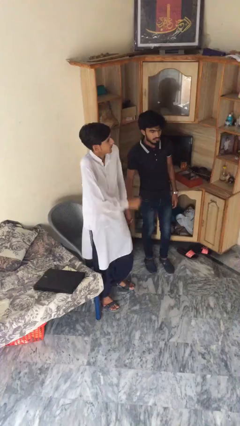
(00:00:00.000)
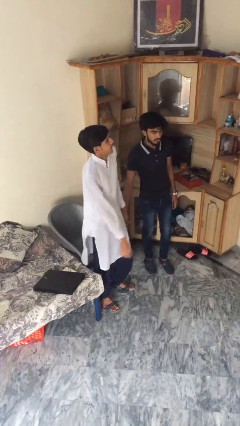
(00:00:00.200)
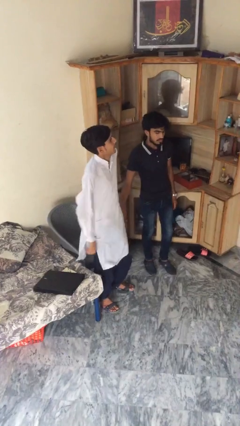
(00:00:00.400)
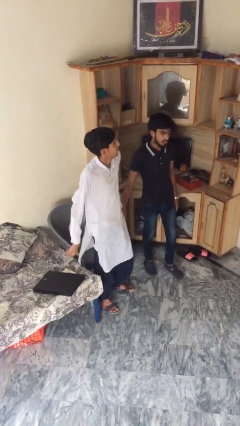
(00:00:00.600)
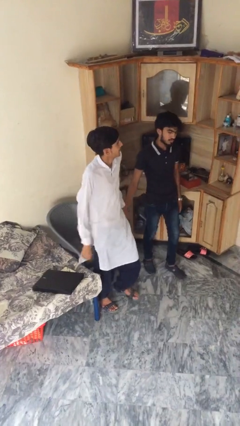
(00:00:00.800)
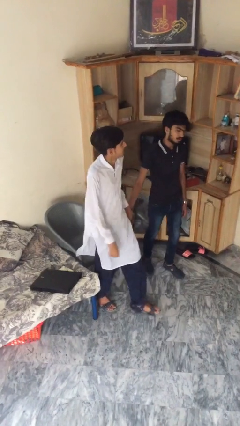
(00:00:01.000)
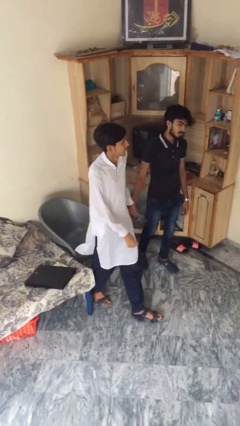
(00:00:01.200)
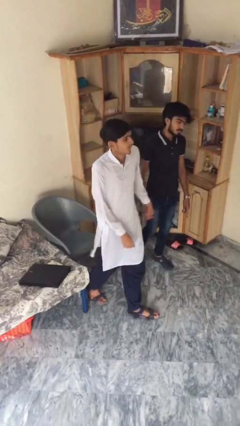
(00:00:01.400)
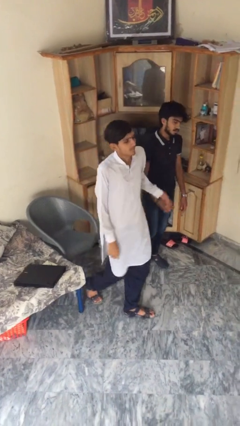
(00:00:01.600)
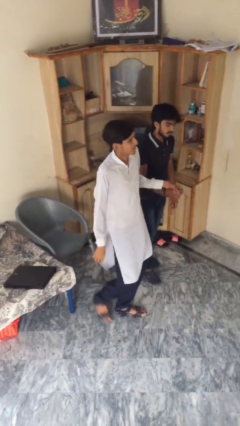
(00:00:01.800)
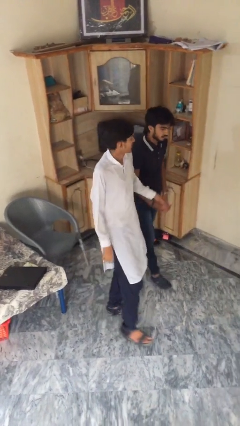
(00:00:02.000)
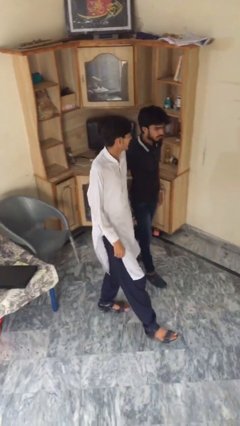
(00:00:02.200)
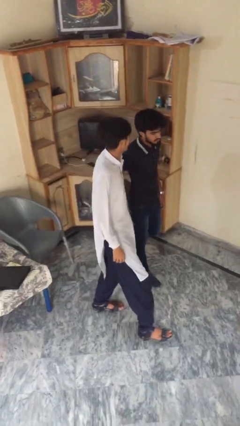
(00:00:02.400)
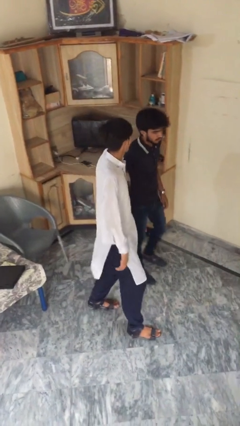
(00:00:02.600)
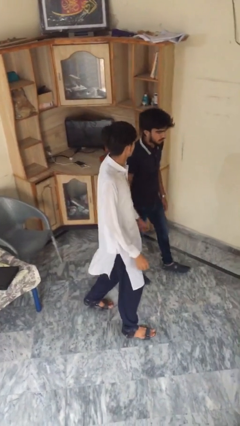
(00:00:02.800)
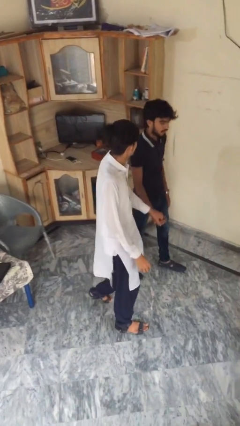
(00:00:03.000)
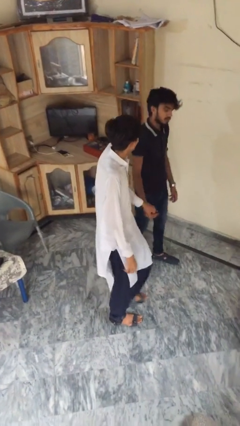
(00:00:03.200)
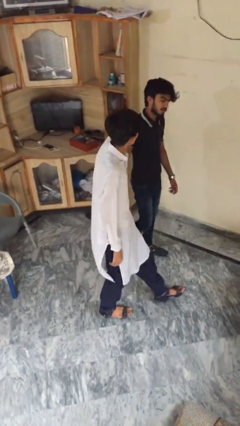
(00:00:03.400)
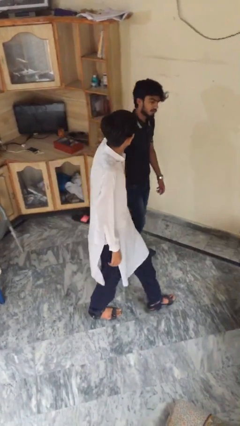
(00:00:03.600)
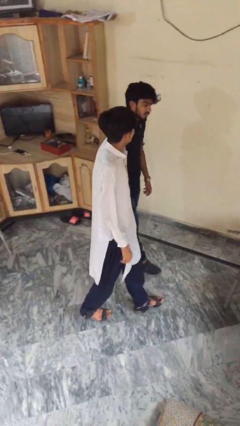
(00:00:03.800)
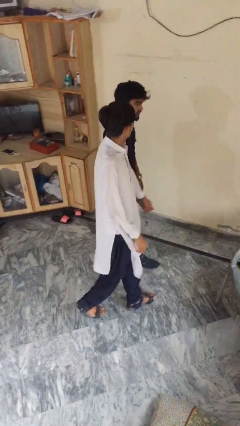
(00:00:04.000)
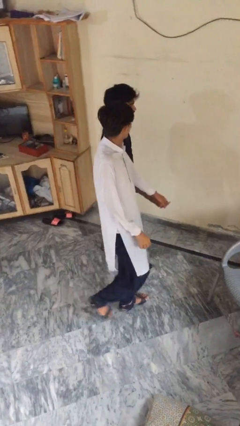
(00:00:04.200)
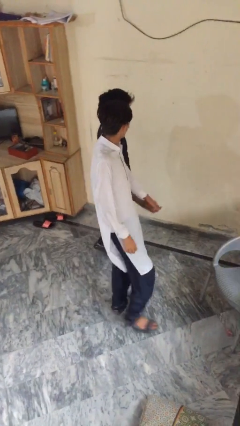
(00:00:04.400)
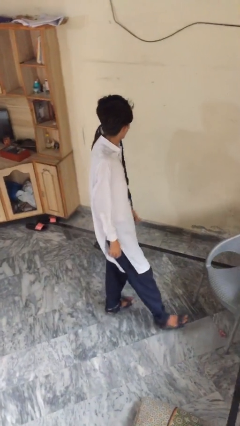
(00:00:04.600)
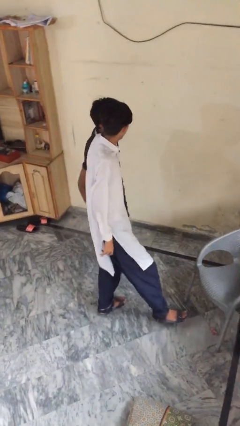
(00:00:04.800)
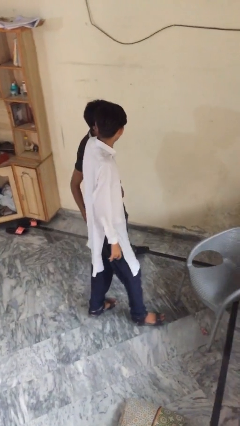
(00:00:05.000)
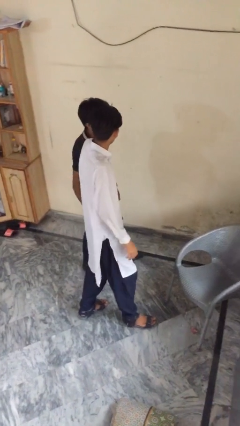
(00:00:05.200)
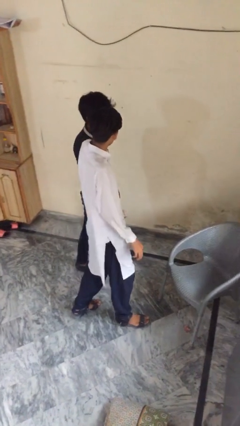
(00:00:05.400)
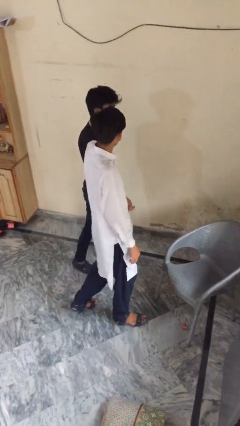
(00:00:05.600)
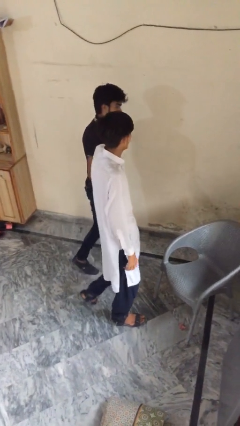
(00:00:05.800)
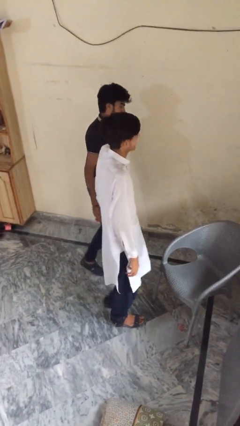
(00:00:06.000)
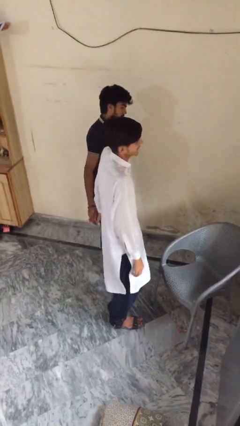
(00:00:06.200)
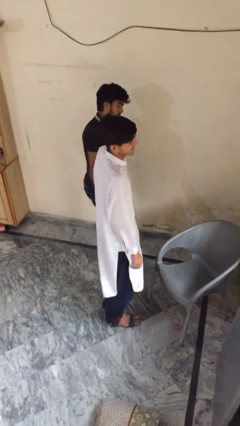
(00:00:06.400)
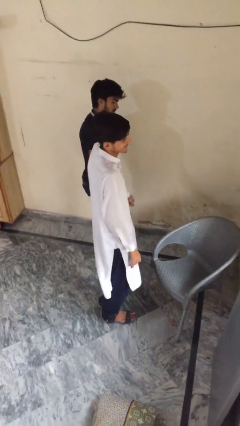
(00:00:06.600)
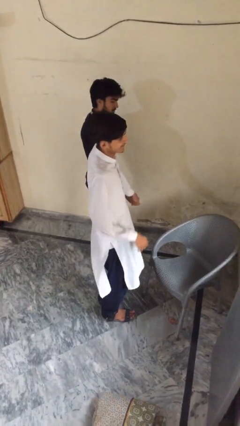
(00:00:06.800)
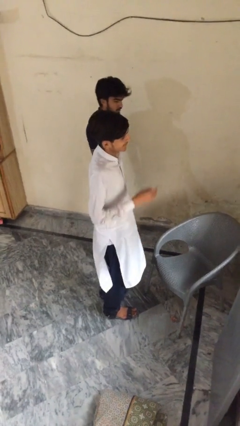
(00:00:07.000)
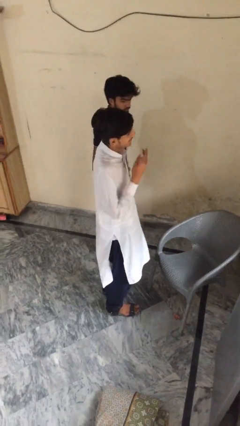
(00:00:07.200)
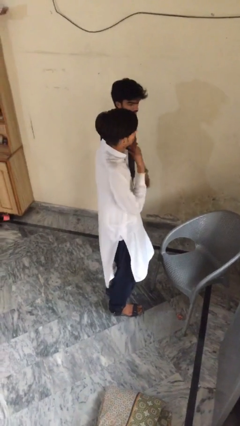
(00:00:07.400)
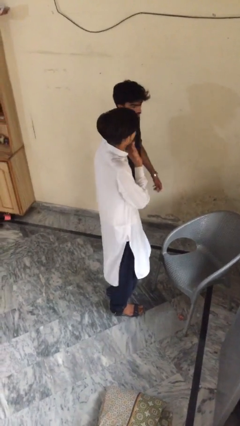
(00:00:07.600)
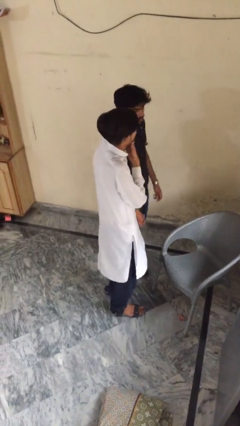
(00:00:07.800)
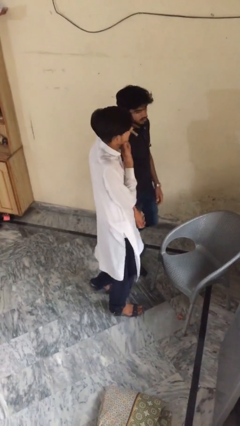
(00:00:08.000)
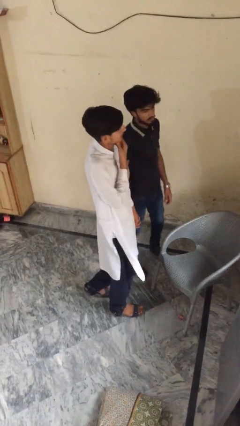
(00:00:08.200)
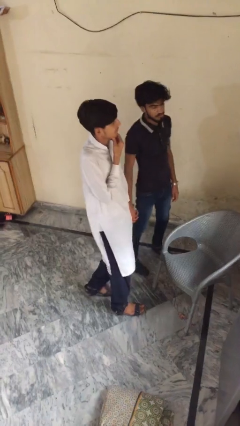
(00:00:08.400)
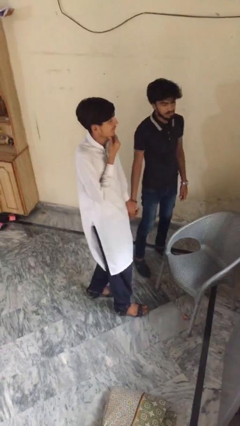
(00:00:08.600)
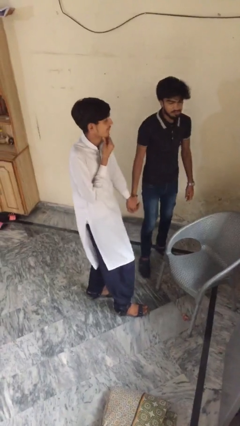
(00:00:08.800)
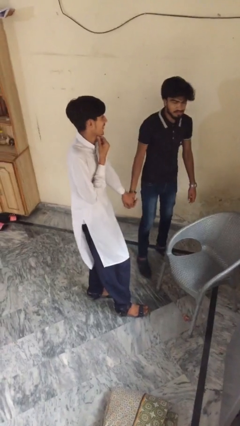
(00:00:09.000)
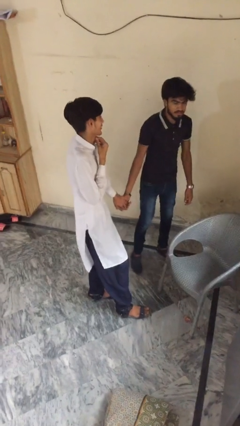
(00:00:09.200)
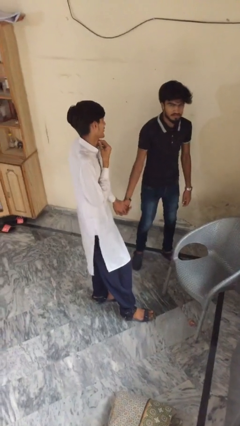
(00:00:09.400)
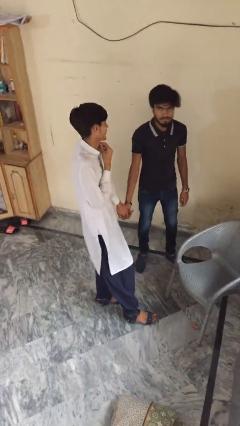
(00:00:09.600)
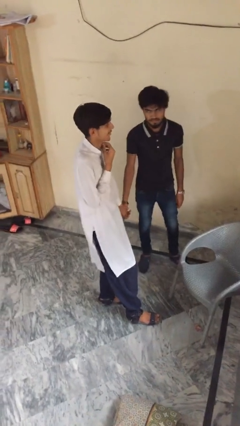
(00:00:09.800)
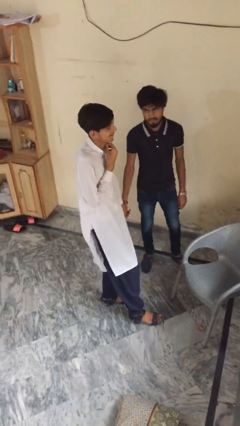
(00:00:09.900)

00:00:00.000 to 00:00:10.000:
person holds hand

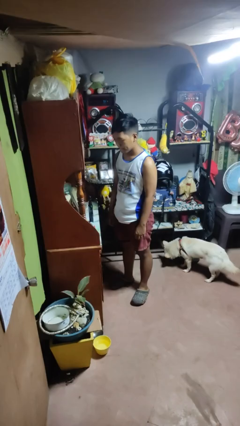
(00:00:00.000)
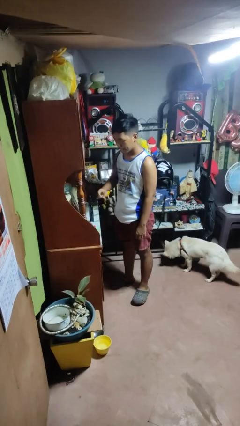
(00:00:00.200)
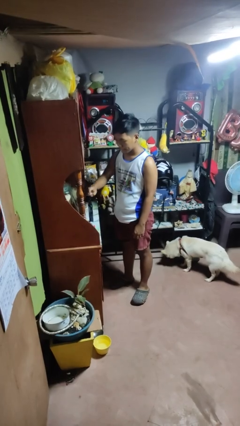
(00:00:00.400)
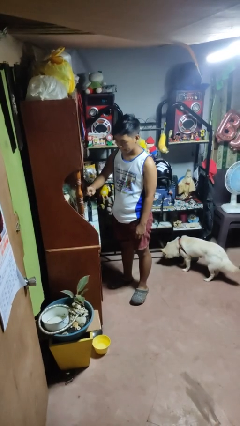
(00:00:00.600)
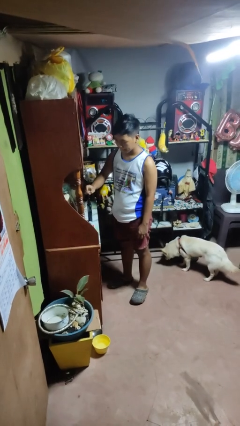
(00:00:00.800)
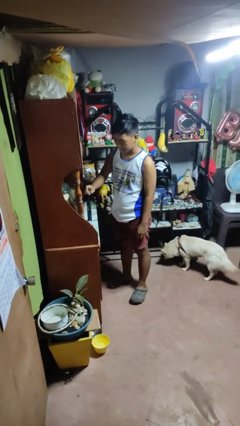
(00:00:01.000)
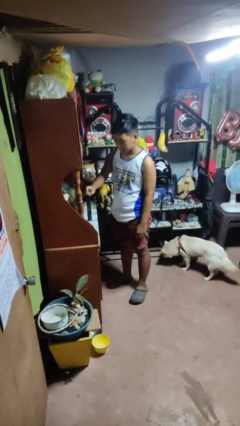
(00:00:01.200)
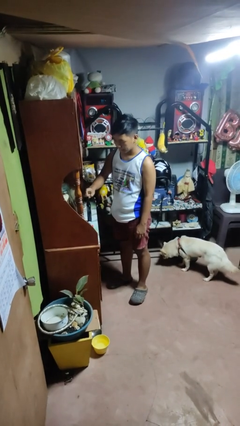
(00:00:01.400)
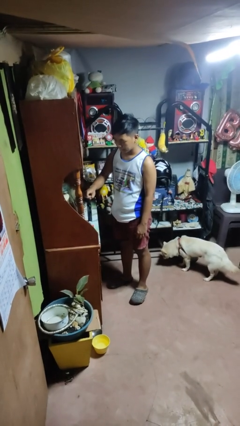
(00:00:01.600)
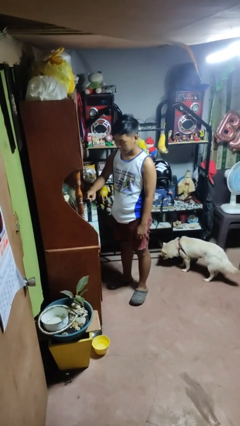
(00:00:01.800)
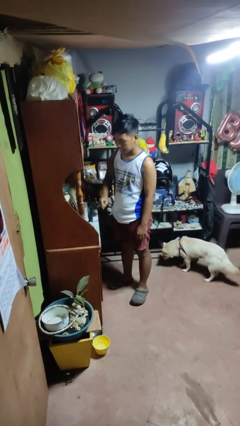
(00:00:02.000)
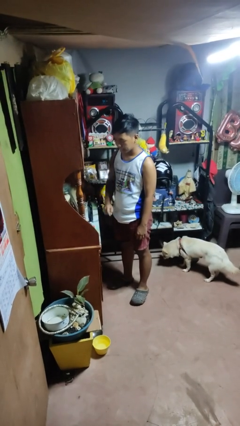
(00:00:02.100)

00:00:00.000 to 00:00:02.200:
person taps object with finger

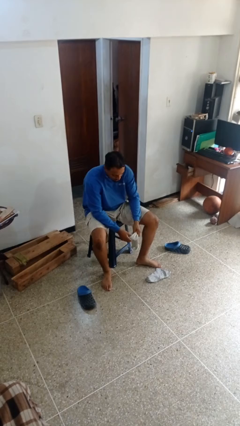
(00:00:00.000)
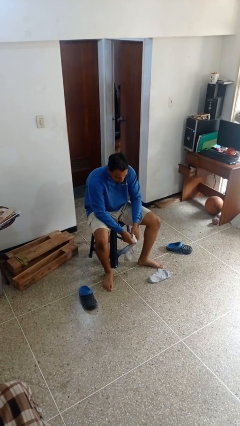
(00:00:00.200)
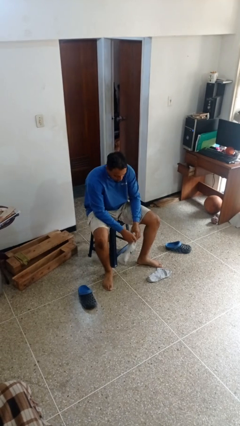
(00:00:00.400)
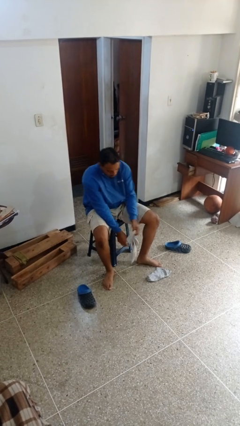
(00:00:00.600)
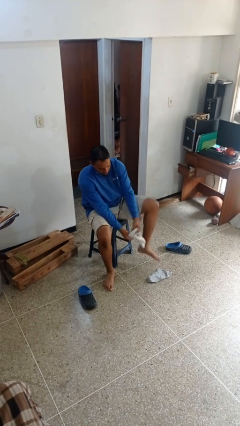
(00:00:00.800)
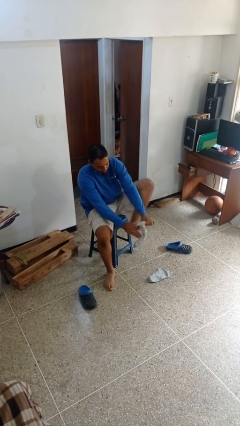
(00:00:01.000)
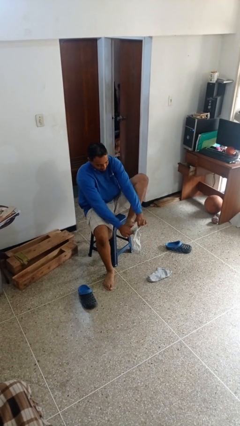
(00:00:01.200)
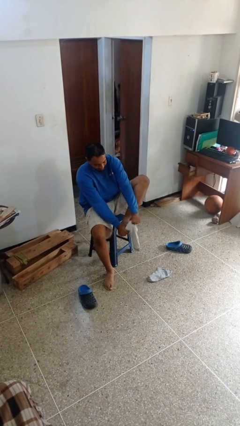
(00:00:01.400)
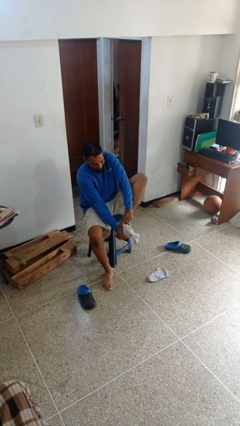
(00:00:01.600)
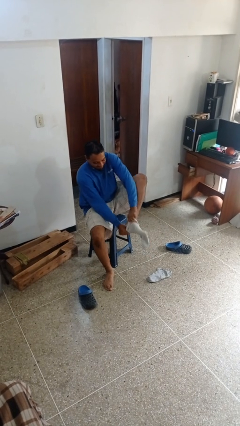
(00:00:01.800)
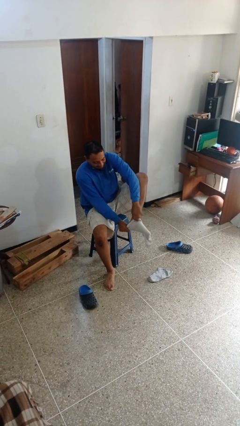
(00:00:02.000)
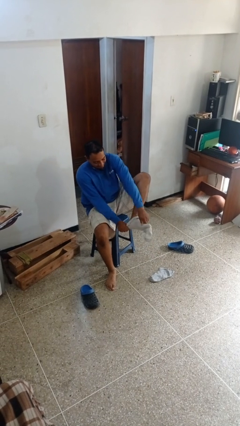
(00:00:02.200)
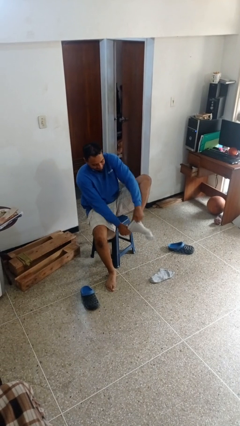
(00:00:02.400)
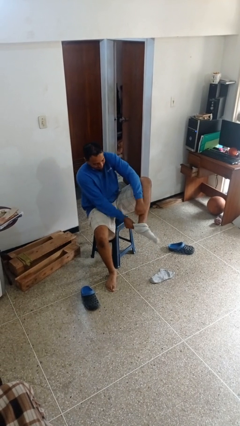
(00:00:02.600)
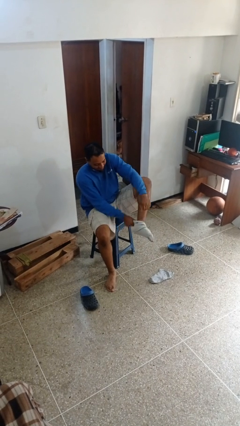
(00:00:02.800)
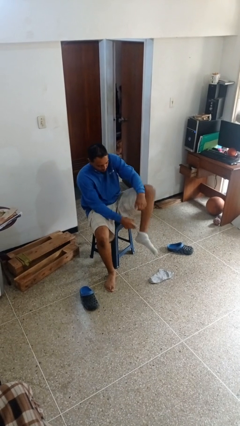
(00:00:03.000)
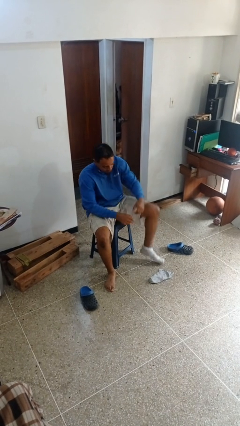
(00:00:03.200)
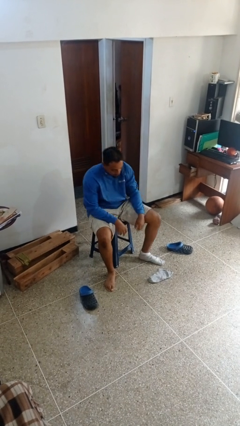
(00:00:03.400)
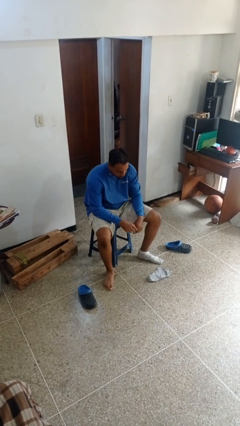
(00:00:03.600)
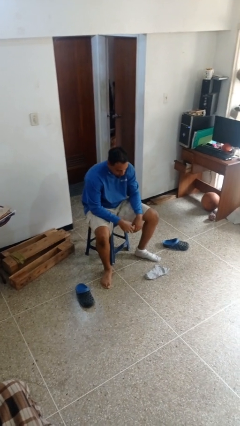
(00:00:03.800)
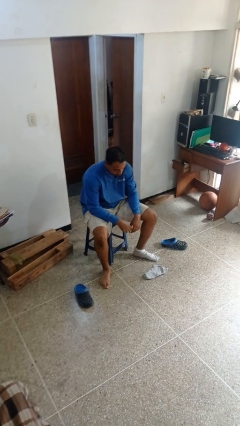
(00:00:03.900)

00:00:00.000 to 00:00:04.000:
person puts on socks

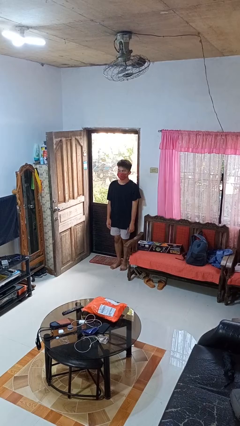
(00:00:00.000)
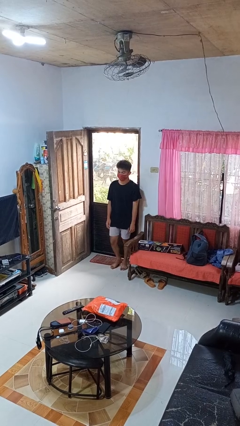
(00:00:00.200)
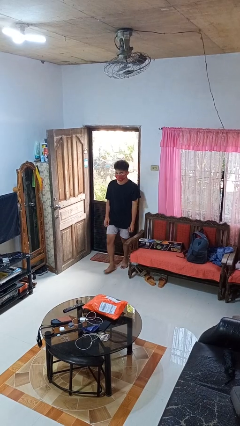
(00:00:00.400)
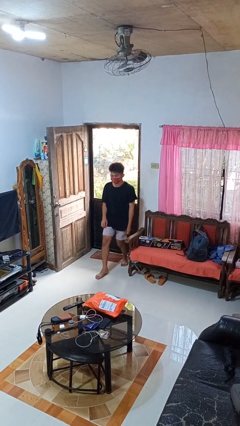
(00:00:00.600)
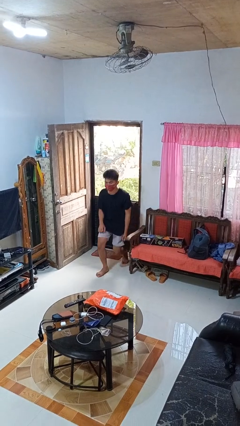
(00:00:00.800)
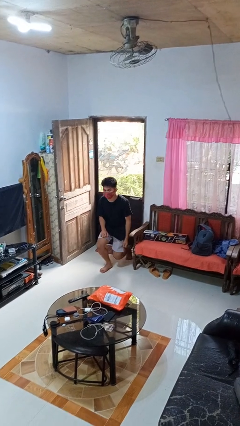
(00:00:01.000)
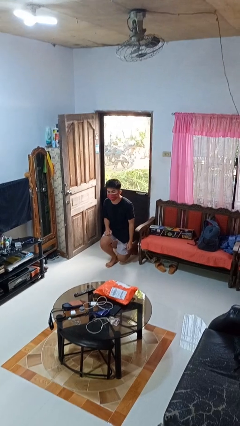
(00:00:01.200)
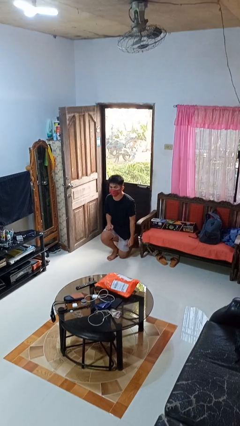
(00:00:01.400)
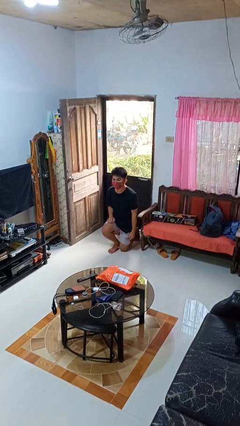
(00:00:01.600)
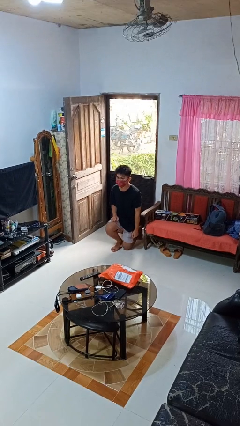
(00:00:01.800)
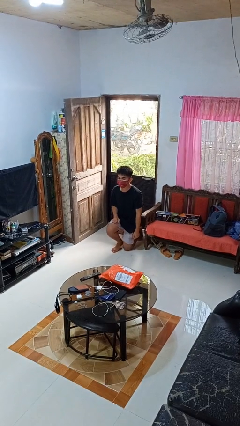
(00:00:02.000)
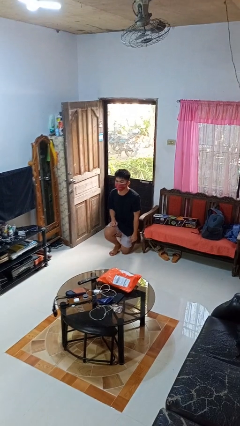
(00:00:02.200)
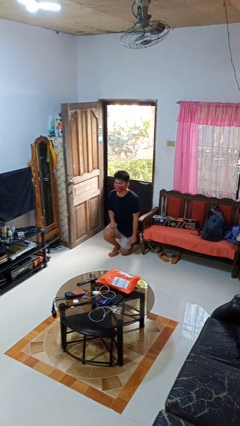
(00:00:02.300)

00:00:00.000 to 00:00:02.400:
person kneels
